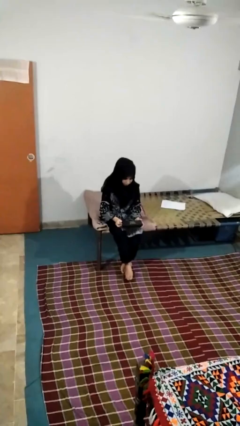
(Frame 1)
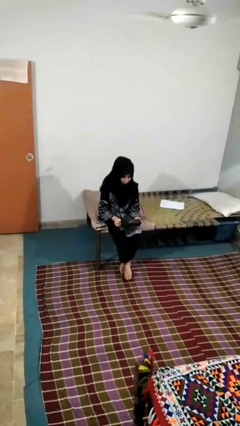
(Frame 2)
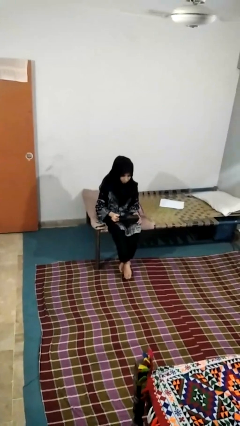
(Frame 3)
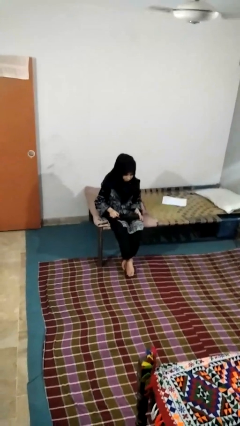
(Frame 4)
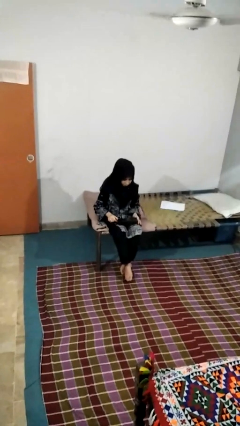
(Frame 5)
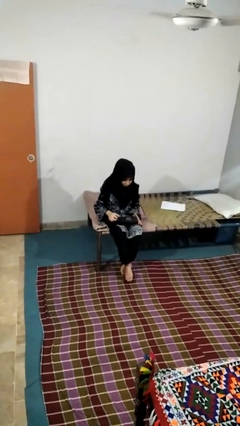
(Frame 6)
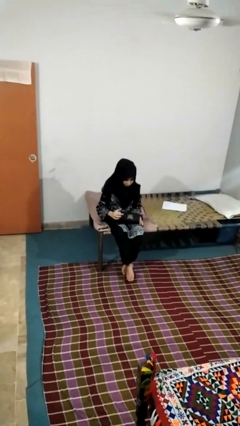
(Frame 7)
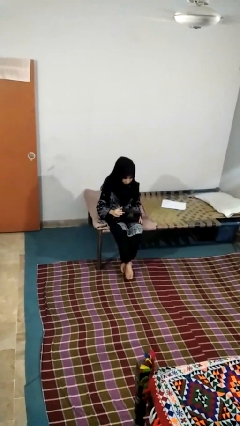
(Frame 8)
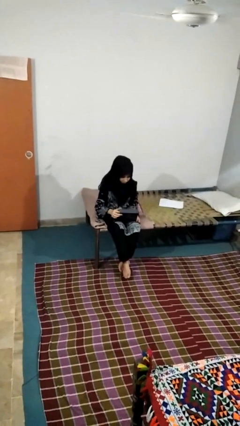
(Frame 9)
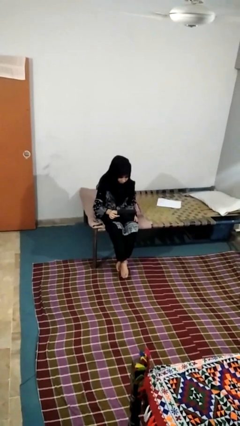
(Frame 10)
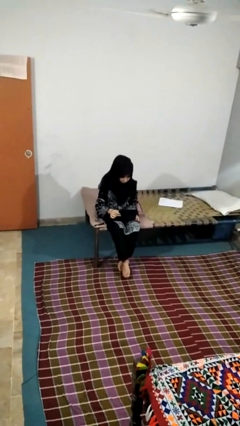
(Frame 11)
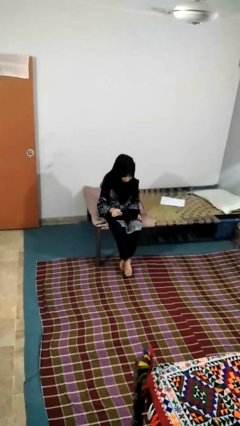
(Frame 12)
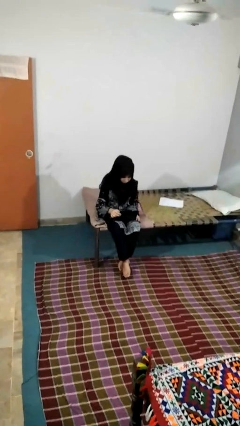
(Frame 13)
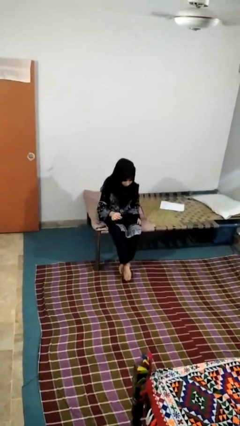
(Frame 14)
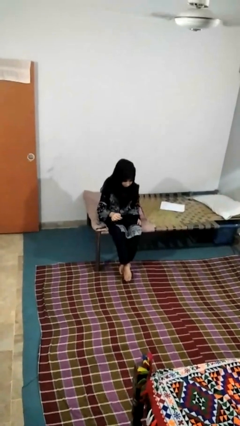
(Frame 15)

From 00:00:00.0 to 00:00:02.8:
person opens jewelry box

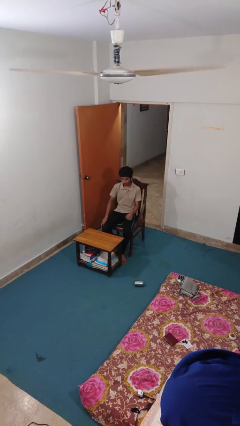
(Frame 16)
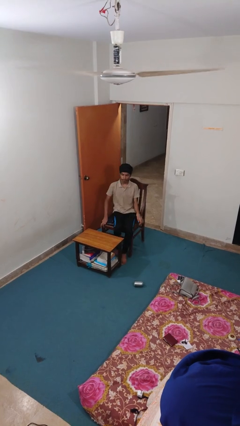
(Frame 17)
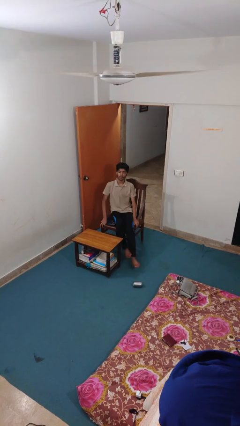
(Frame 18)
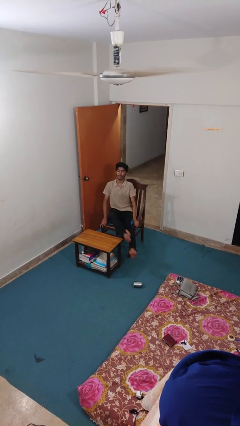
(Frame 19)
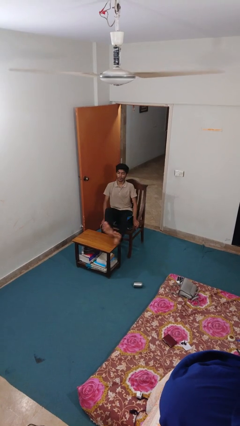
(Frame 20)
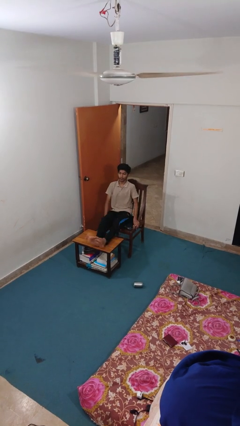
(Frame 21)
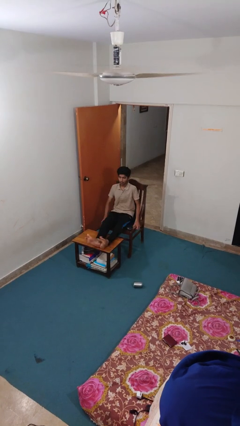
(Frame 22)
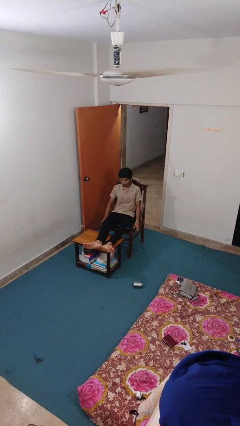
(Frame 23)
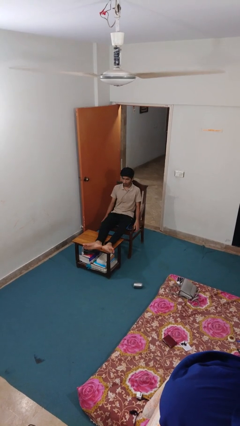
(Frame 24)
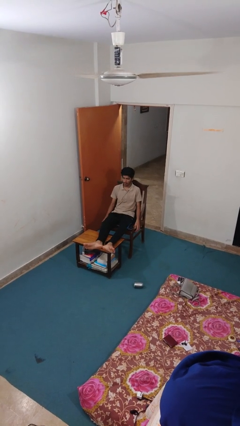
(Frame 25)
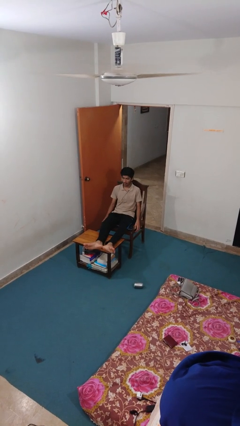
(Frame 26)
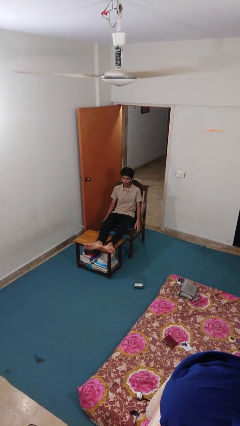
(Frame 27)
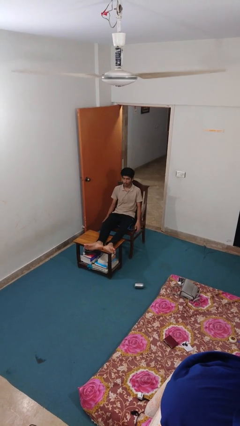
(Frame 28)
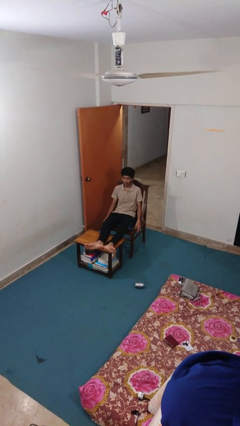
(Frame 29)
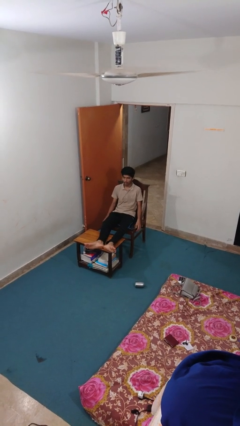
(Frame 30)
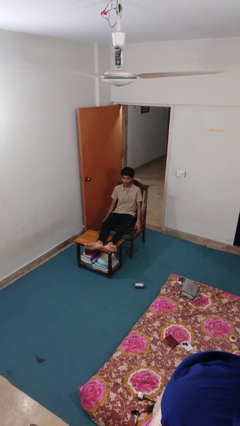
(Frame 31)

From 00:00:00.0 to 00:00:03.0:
person puts feet up

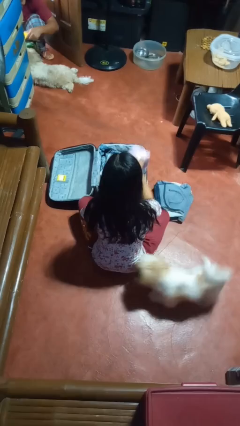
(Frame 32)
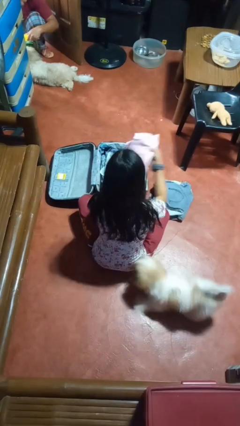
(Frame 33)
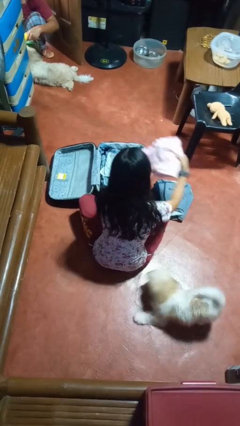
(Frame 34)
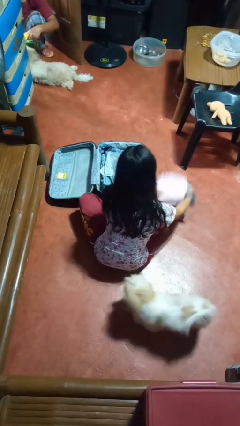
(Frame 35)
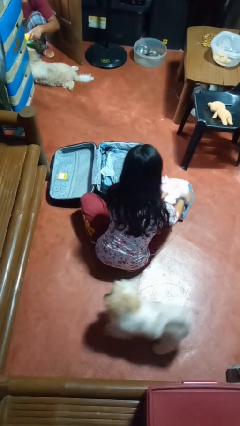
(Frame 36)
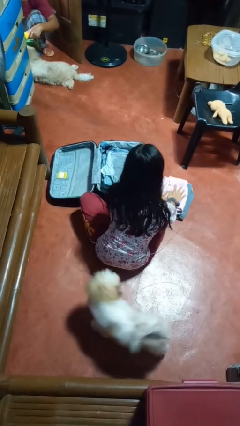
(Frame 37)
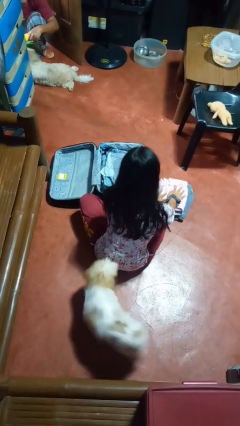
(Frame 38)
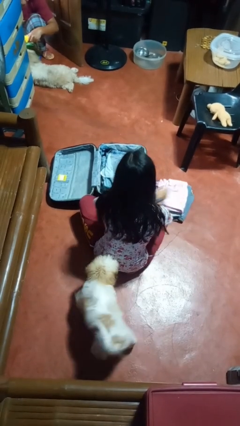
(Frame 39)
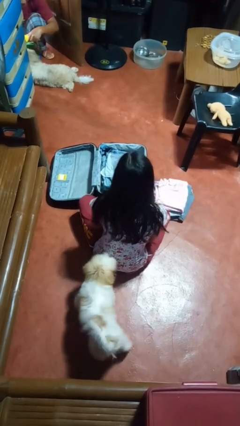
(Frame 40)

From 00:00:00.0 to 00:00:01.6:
person unloads clothes from suitcase

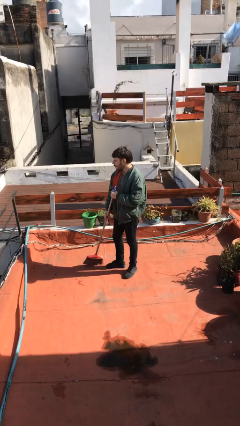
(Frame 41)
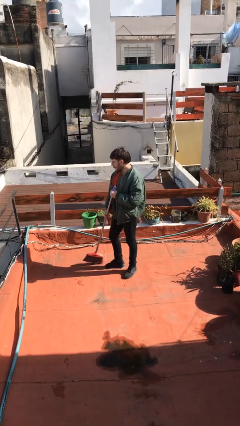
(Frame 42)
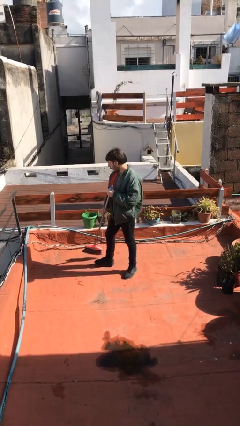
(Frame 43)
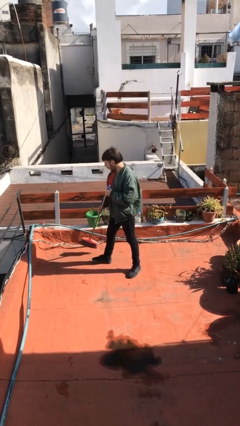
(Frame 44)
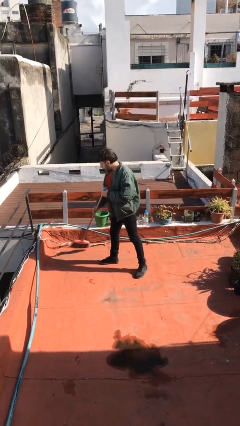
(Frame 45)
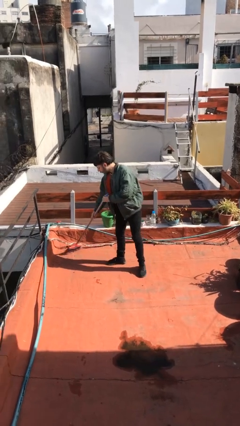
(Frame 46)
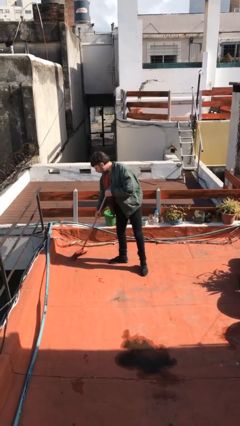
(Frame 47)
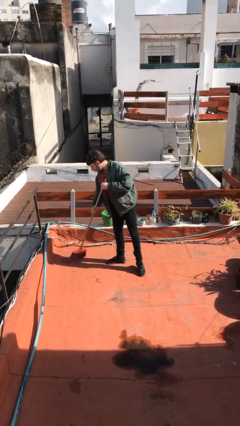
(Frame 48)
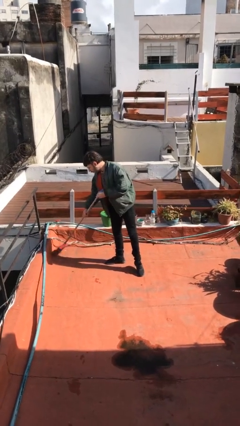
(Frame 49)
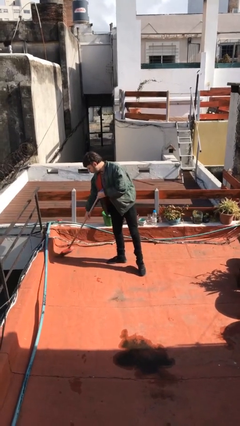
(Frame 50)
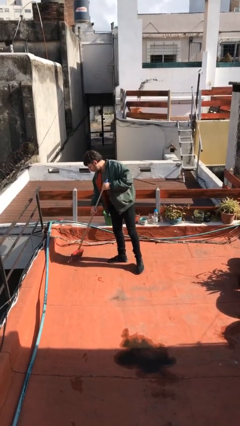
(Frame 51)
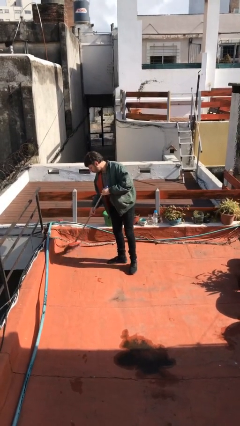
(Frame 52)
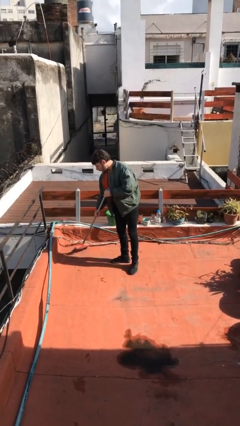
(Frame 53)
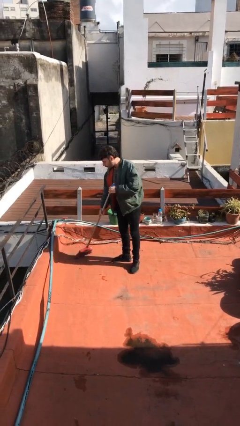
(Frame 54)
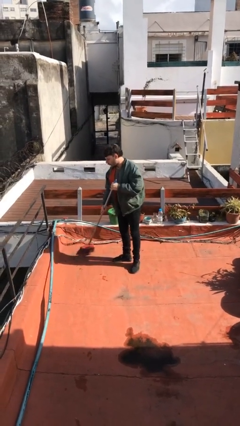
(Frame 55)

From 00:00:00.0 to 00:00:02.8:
person sweeps floor

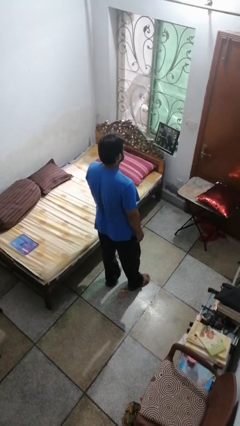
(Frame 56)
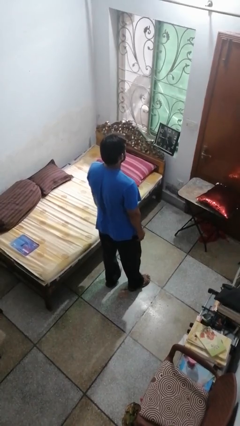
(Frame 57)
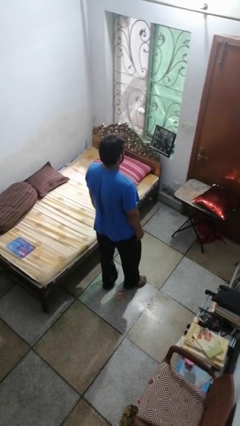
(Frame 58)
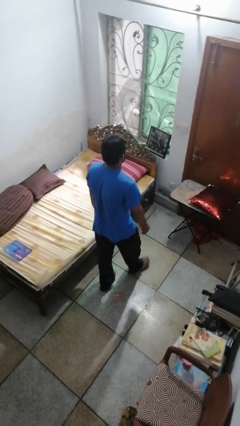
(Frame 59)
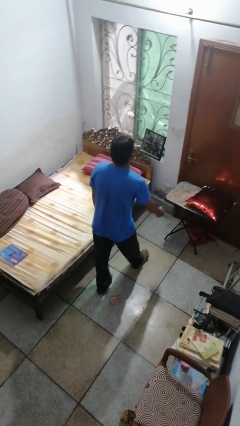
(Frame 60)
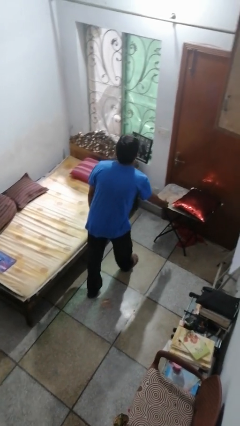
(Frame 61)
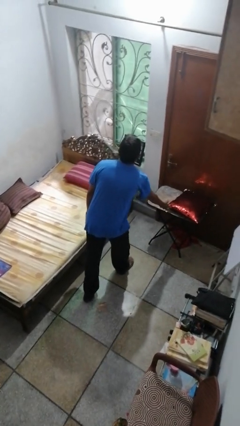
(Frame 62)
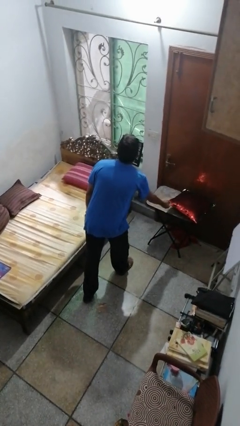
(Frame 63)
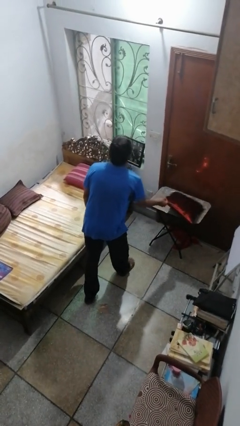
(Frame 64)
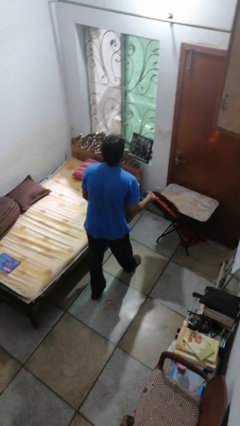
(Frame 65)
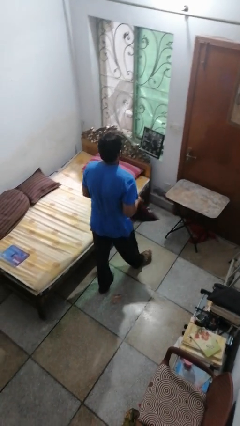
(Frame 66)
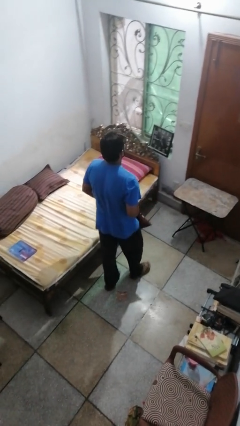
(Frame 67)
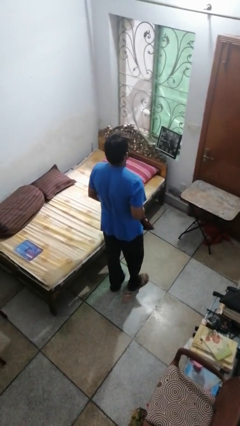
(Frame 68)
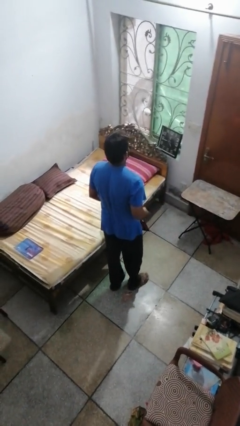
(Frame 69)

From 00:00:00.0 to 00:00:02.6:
person picks up object from table

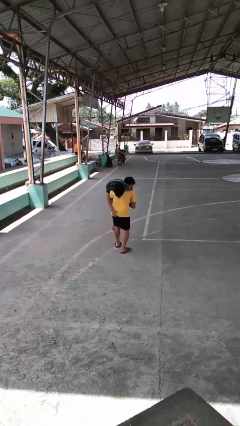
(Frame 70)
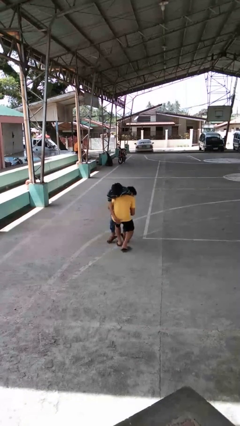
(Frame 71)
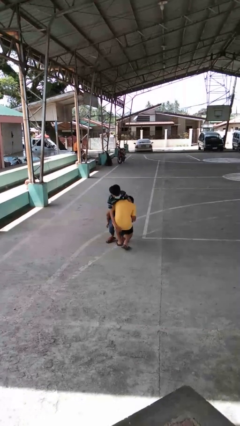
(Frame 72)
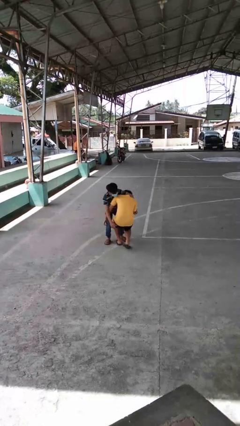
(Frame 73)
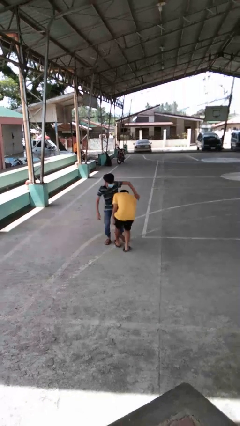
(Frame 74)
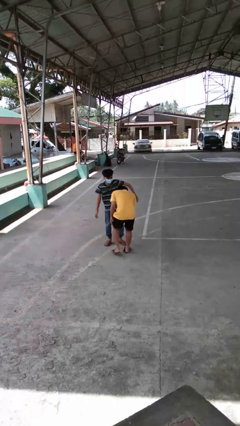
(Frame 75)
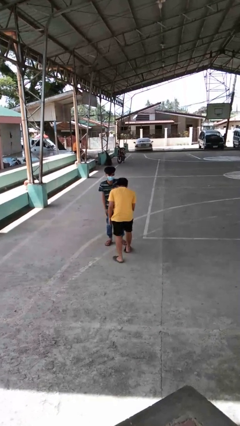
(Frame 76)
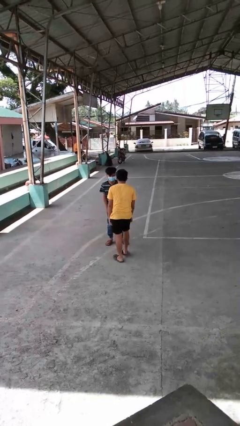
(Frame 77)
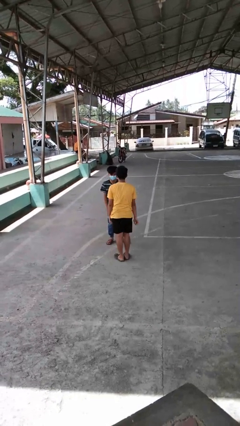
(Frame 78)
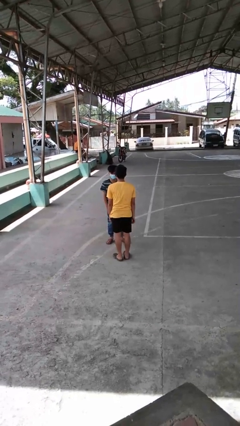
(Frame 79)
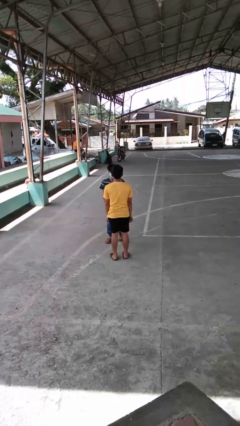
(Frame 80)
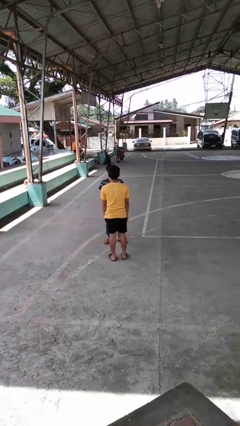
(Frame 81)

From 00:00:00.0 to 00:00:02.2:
person puts down person

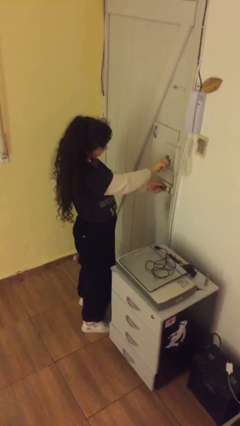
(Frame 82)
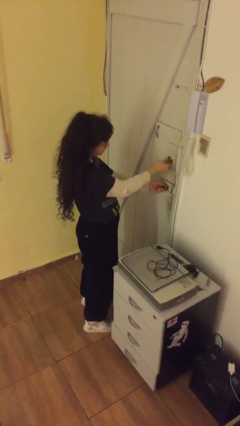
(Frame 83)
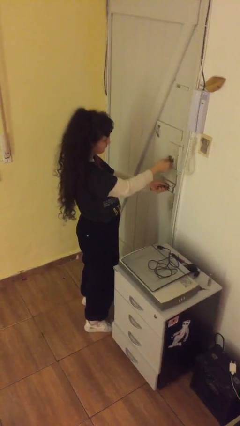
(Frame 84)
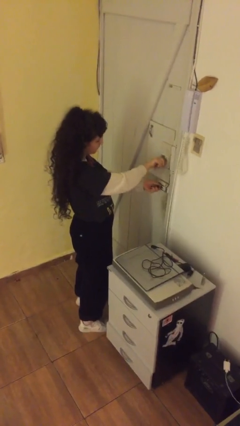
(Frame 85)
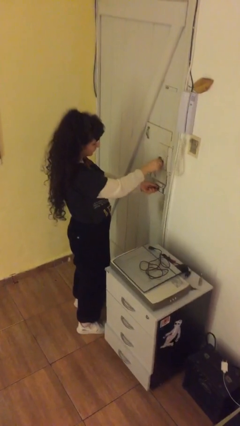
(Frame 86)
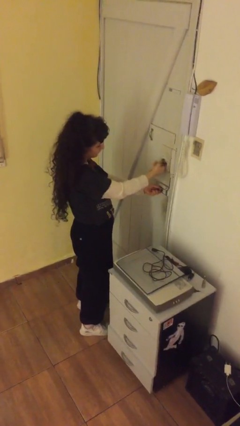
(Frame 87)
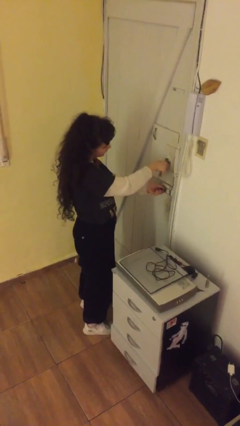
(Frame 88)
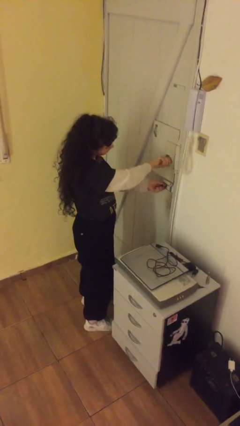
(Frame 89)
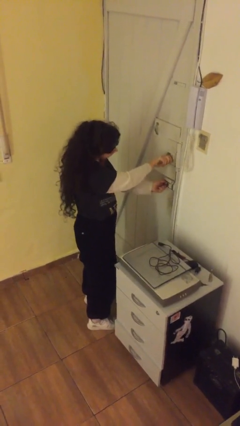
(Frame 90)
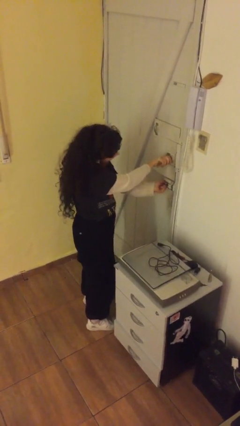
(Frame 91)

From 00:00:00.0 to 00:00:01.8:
person unlocks door with keys

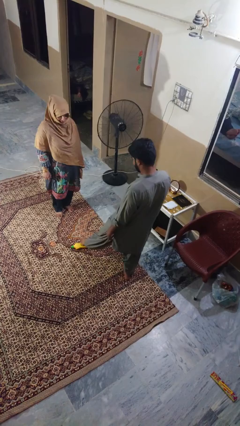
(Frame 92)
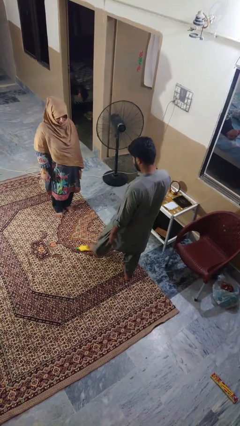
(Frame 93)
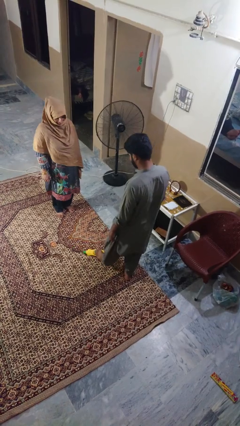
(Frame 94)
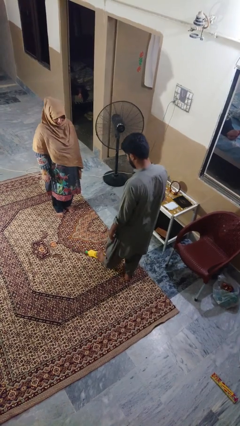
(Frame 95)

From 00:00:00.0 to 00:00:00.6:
person kicks object to person
